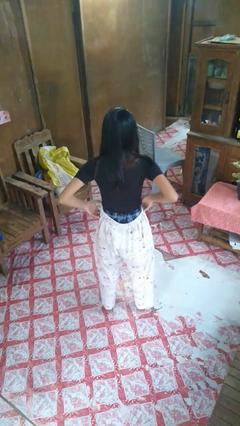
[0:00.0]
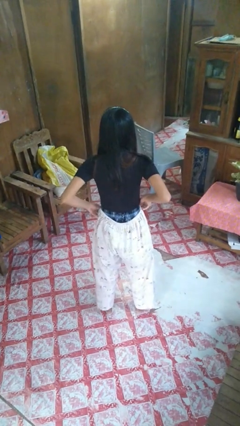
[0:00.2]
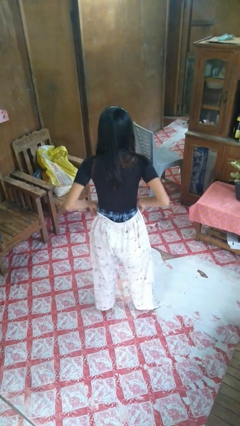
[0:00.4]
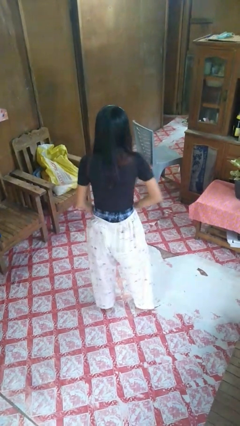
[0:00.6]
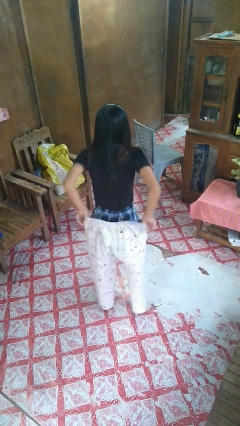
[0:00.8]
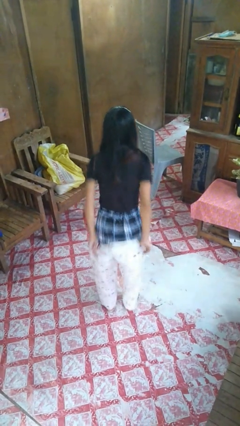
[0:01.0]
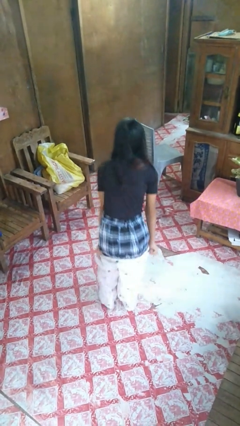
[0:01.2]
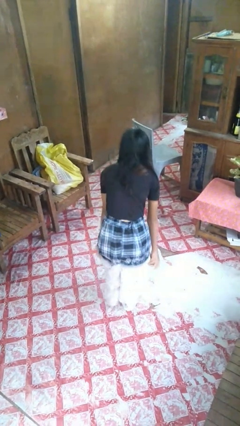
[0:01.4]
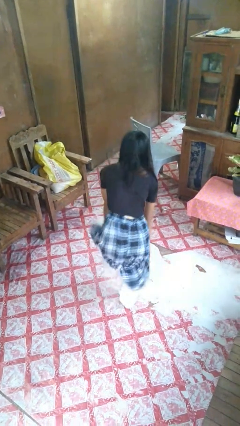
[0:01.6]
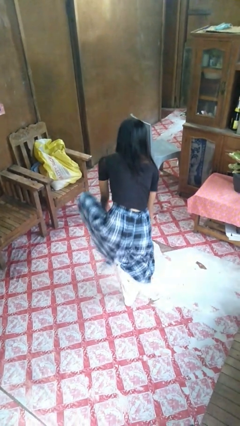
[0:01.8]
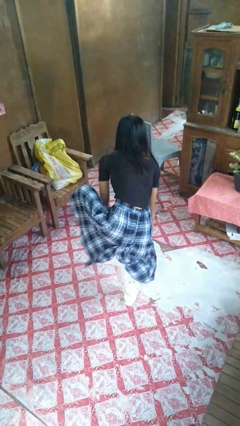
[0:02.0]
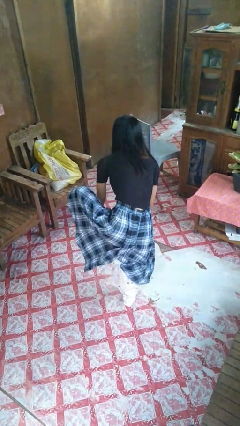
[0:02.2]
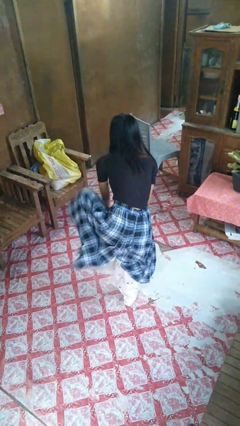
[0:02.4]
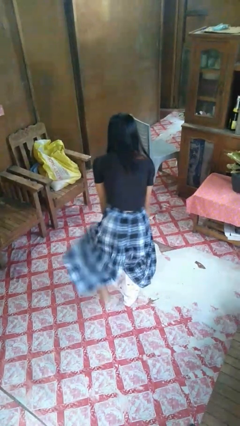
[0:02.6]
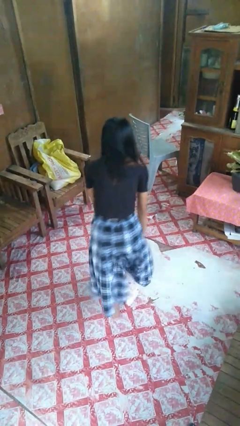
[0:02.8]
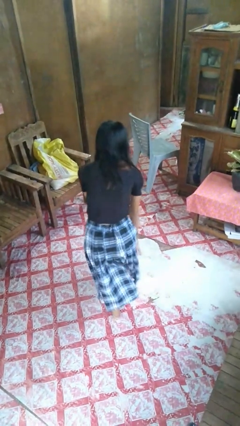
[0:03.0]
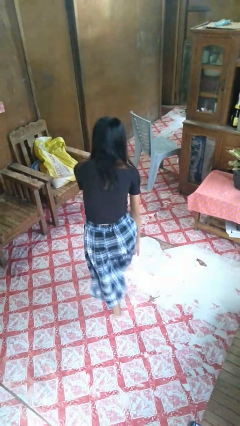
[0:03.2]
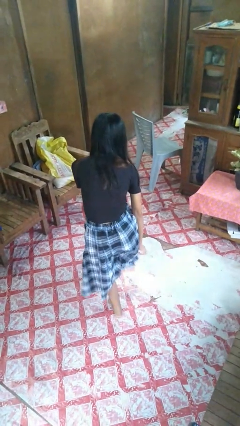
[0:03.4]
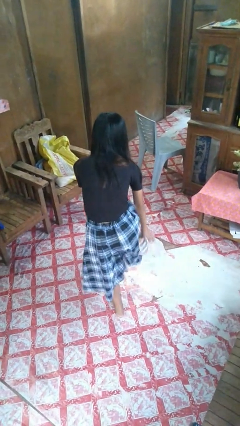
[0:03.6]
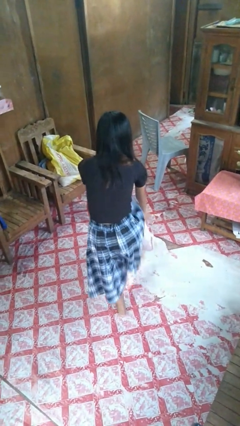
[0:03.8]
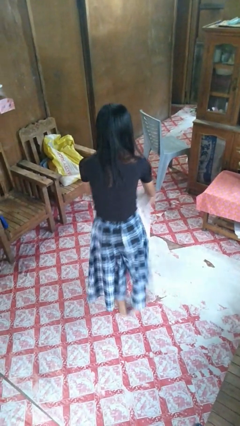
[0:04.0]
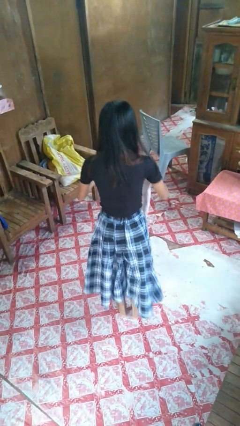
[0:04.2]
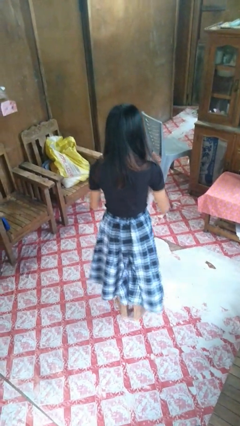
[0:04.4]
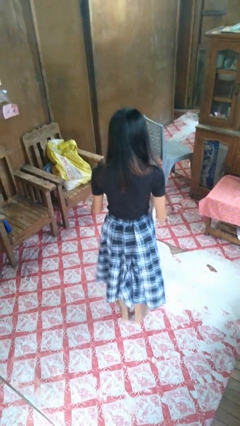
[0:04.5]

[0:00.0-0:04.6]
person takes off pants

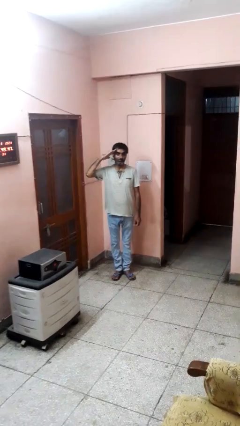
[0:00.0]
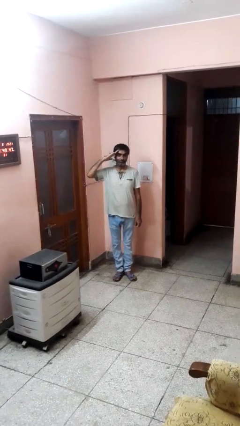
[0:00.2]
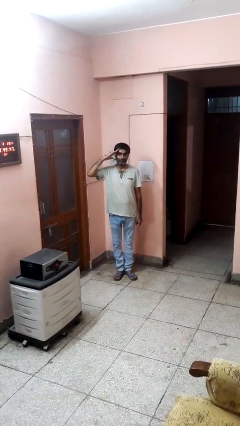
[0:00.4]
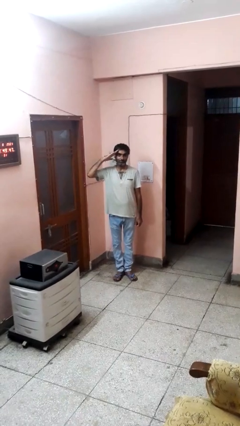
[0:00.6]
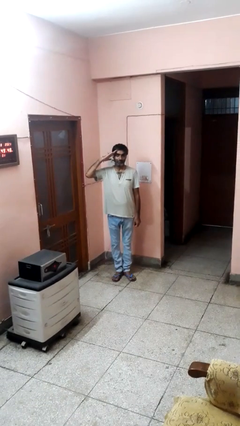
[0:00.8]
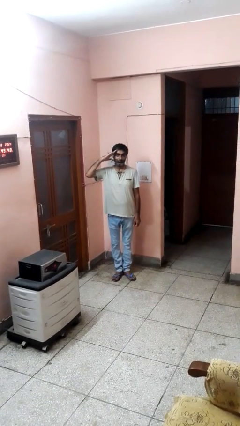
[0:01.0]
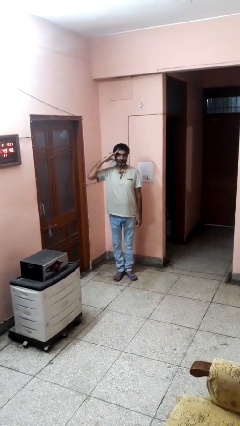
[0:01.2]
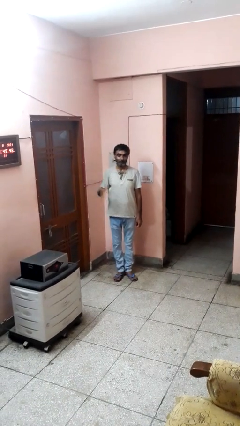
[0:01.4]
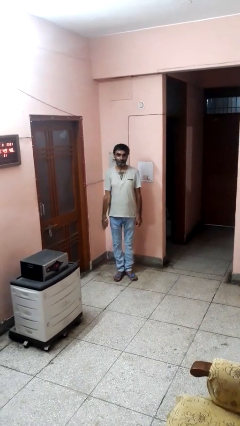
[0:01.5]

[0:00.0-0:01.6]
person salutes

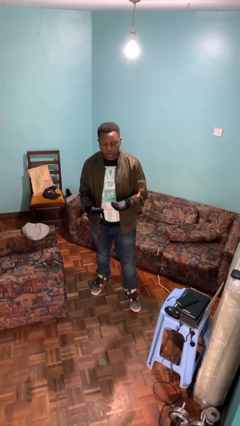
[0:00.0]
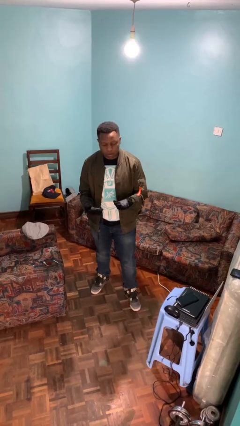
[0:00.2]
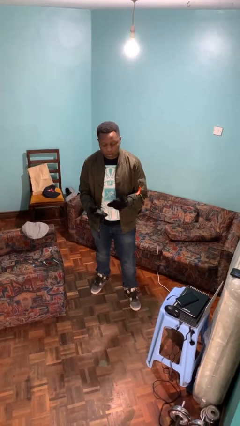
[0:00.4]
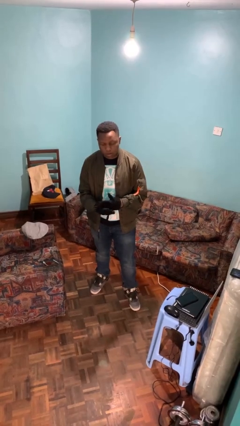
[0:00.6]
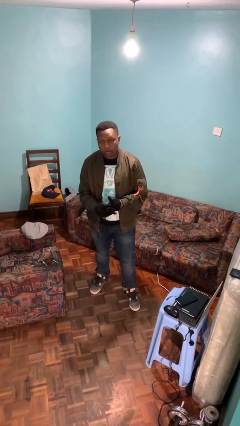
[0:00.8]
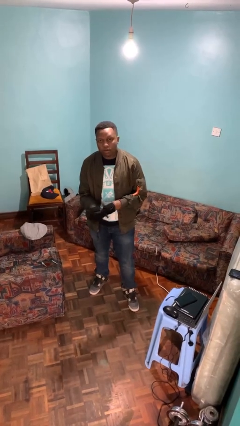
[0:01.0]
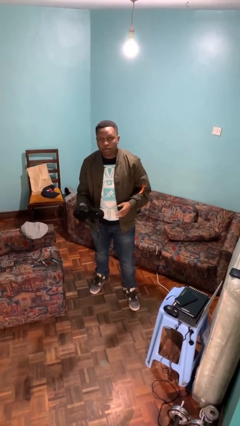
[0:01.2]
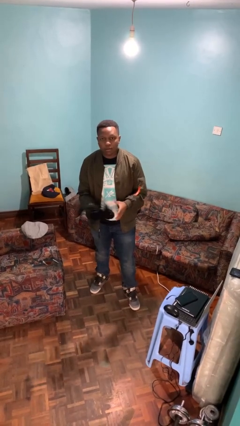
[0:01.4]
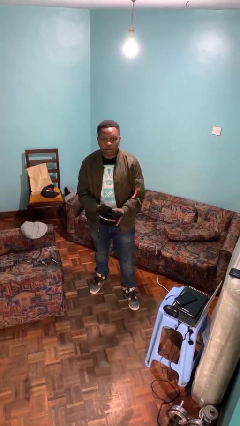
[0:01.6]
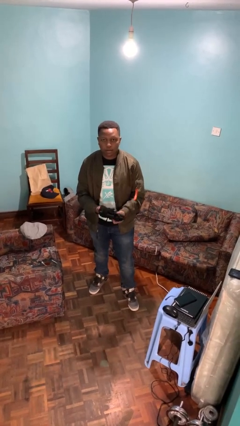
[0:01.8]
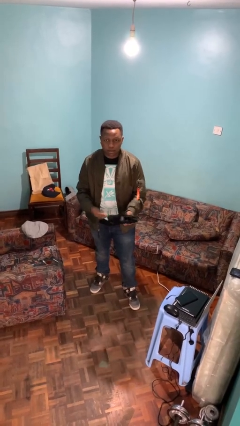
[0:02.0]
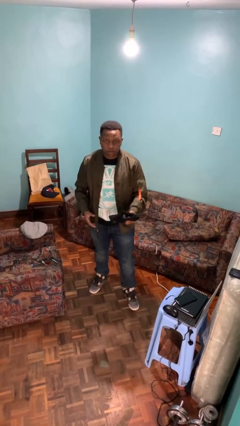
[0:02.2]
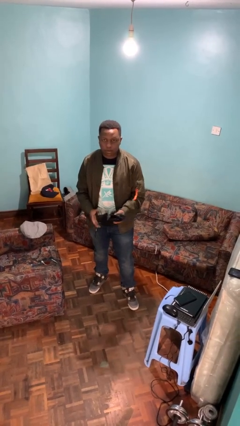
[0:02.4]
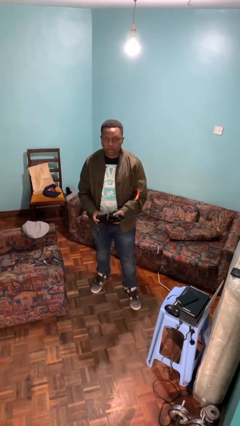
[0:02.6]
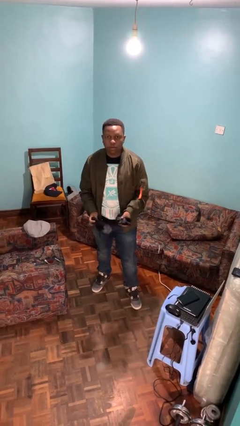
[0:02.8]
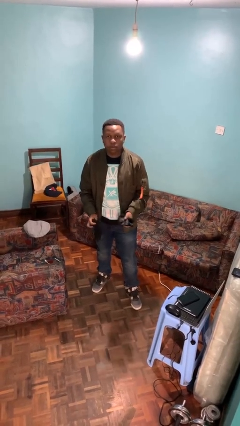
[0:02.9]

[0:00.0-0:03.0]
person takes off gloves

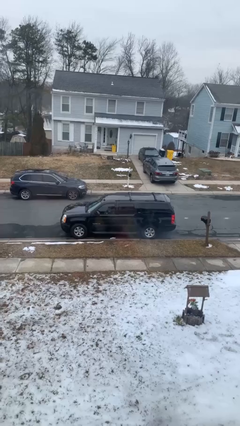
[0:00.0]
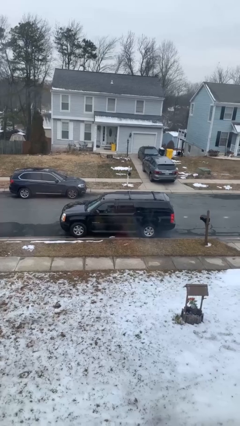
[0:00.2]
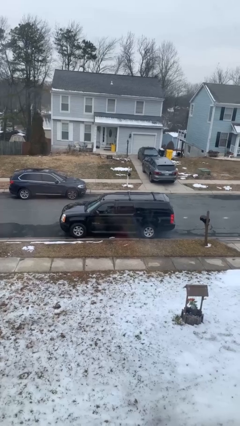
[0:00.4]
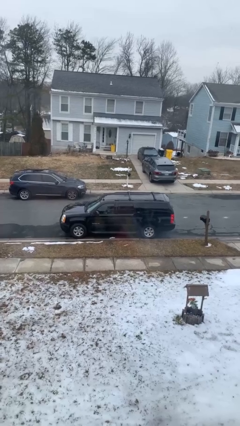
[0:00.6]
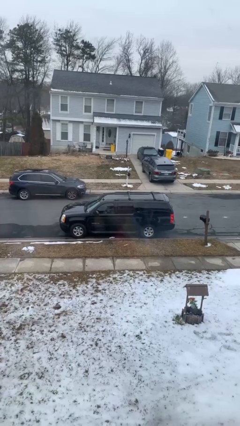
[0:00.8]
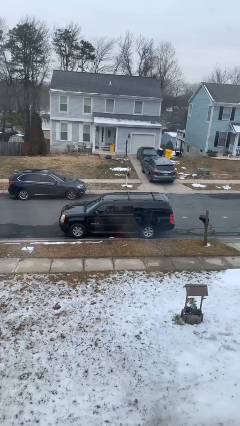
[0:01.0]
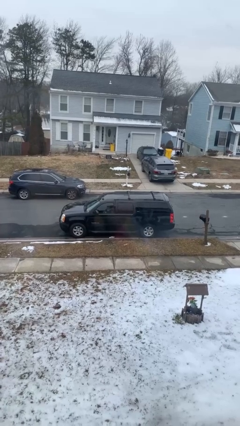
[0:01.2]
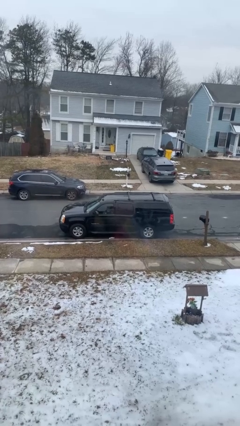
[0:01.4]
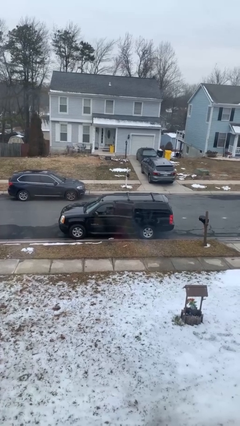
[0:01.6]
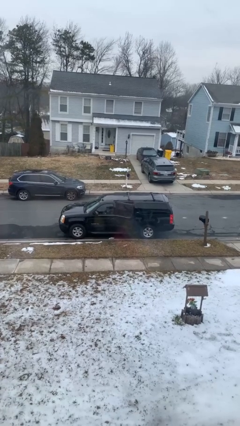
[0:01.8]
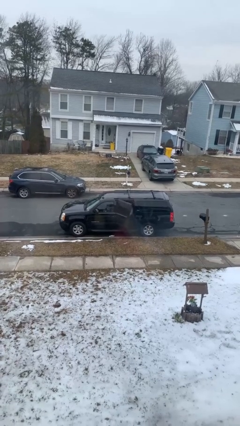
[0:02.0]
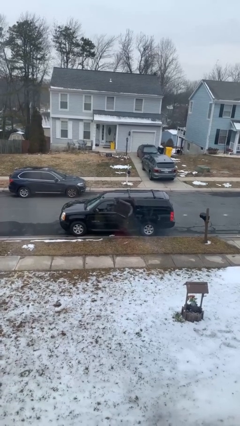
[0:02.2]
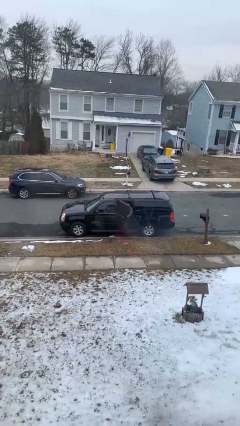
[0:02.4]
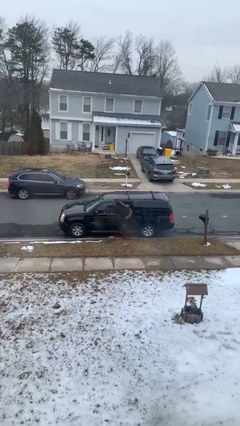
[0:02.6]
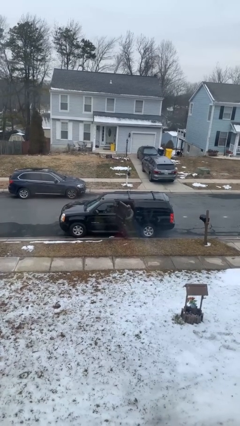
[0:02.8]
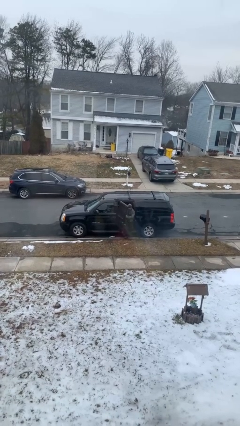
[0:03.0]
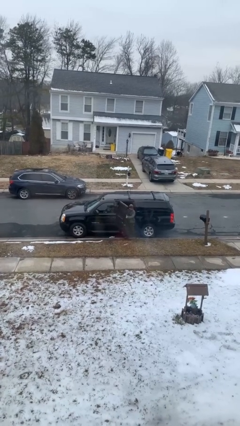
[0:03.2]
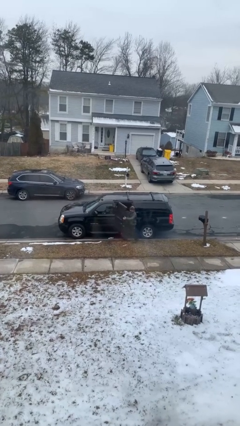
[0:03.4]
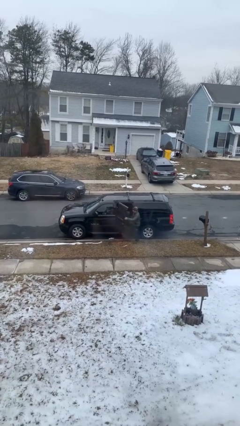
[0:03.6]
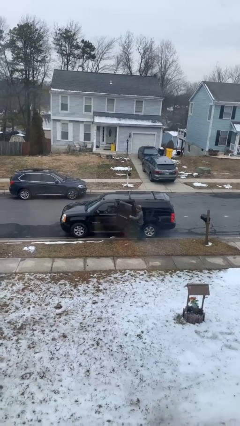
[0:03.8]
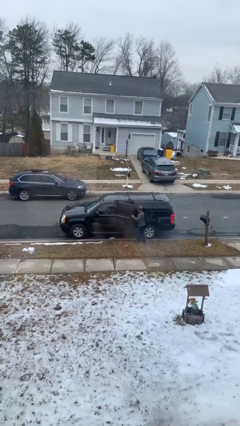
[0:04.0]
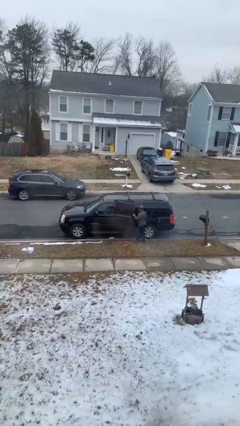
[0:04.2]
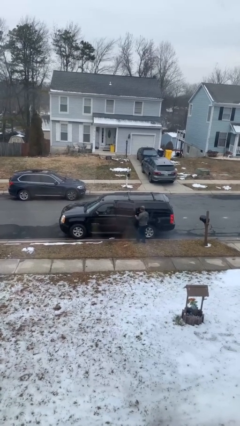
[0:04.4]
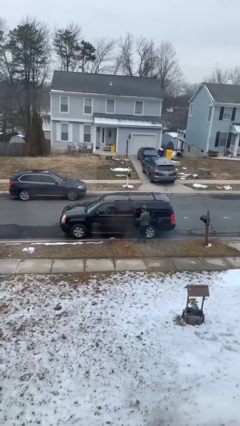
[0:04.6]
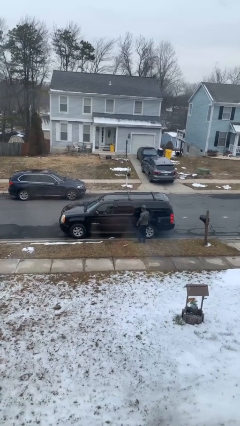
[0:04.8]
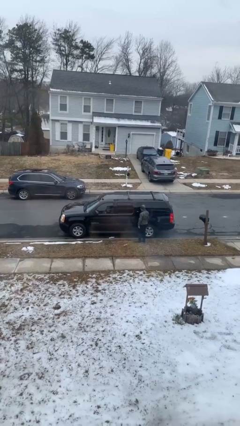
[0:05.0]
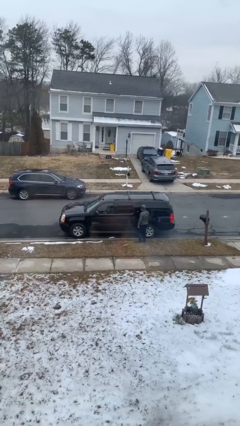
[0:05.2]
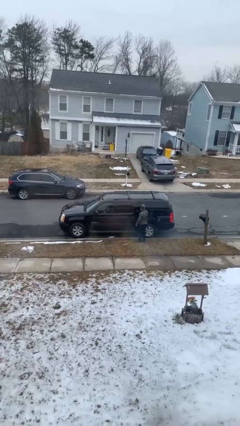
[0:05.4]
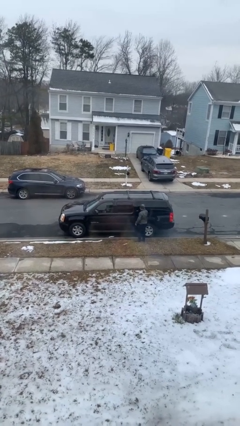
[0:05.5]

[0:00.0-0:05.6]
car drops off person

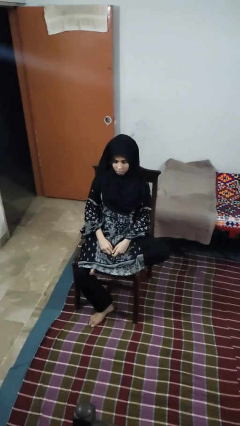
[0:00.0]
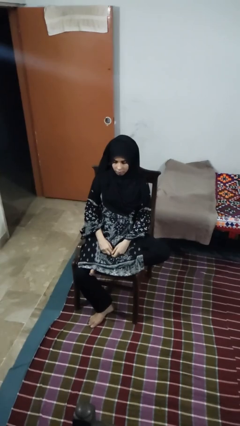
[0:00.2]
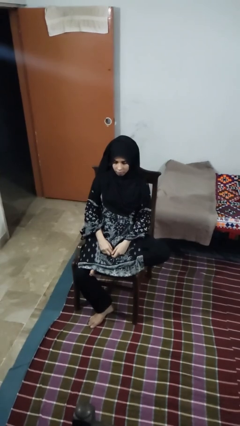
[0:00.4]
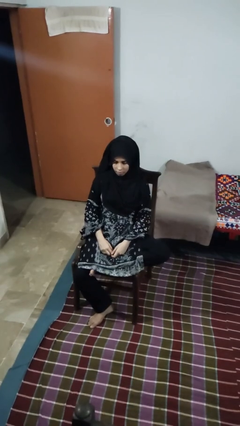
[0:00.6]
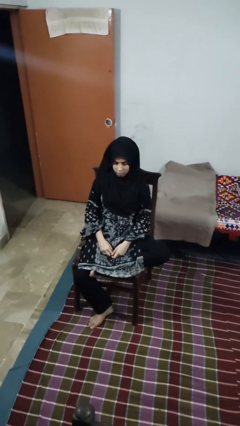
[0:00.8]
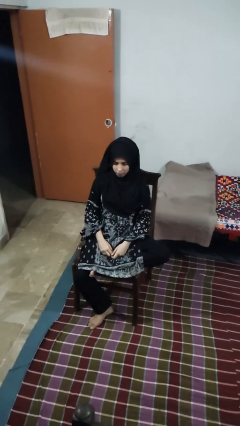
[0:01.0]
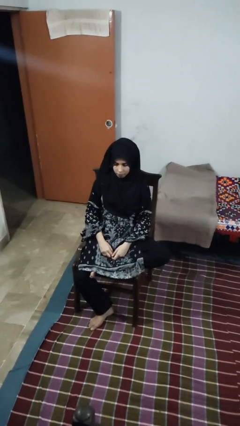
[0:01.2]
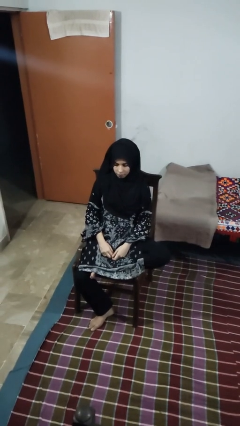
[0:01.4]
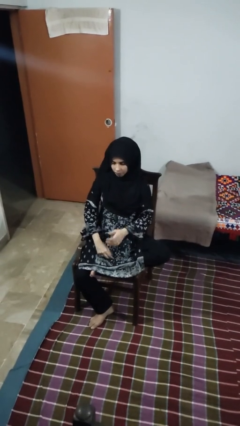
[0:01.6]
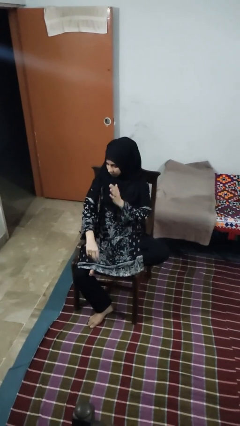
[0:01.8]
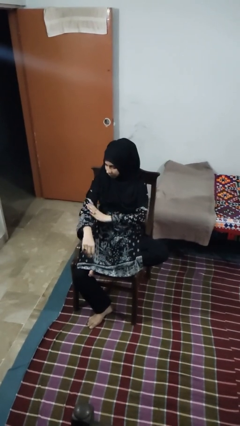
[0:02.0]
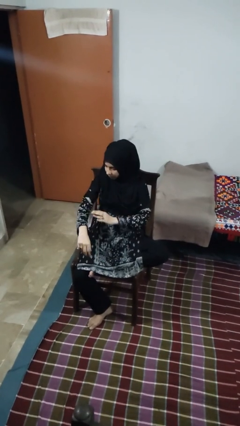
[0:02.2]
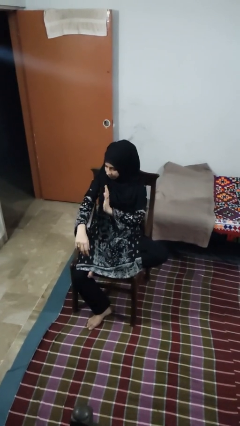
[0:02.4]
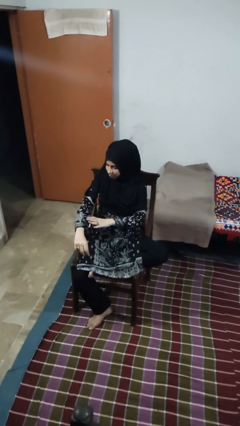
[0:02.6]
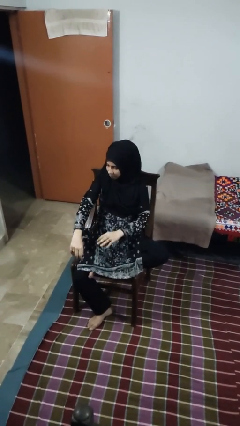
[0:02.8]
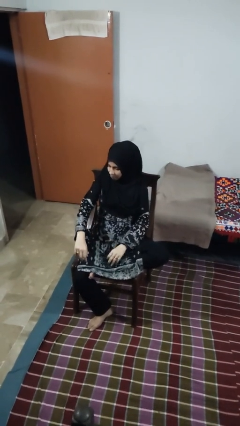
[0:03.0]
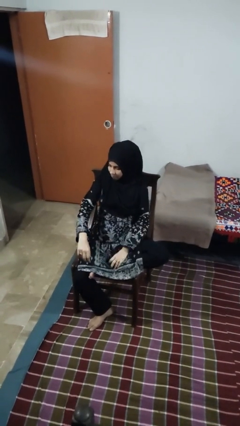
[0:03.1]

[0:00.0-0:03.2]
person swats bug
